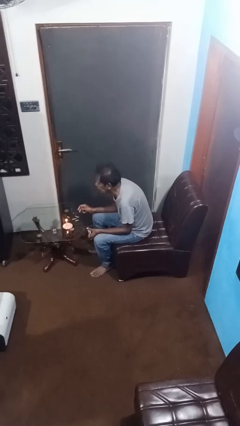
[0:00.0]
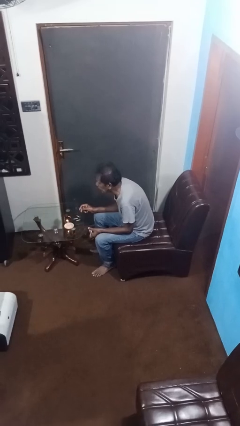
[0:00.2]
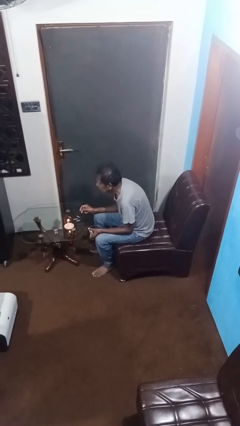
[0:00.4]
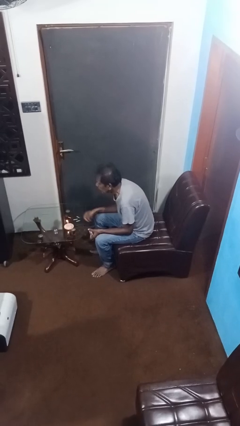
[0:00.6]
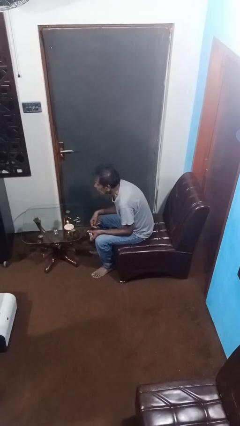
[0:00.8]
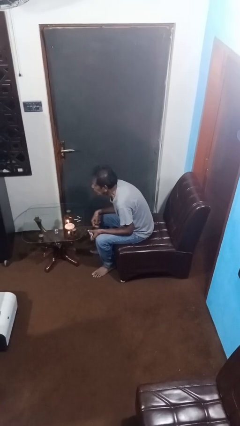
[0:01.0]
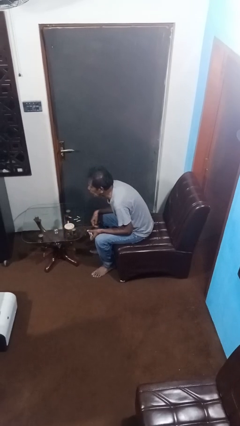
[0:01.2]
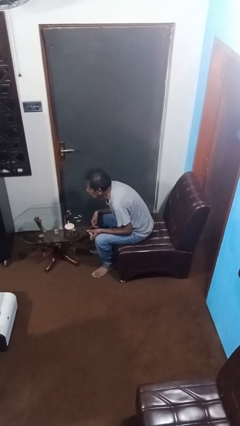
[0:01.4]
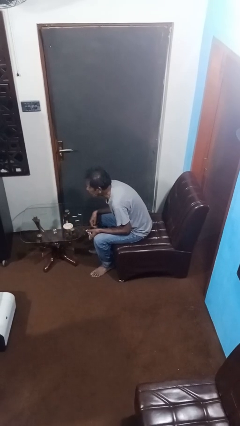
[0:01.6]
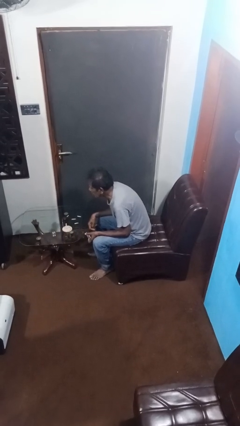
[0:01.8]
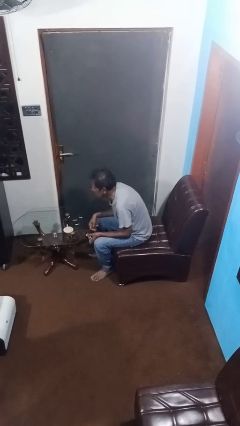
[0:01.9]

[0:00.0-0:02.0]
person extinguishes candle

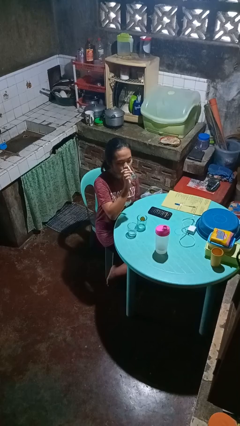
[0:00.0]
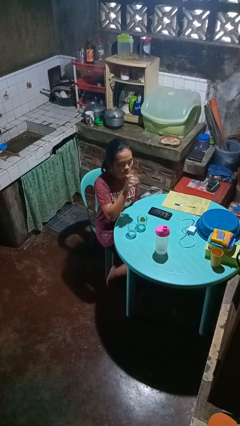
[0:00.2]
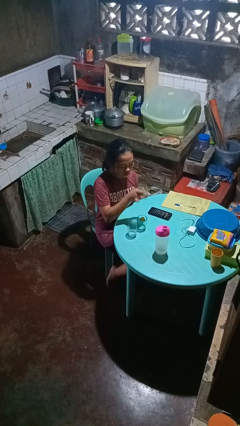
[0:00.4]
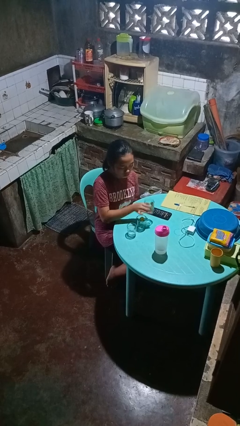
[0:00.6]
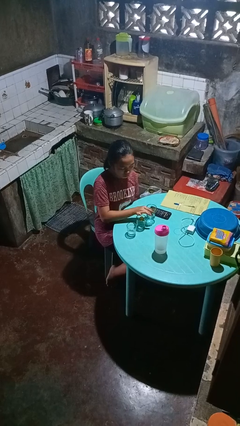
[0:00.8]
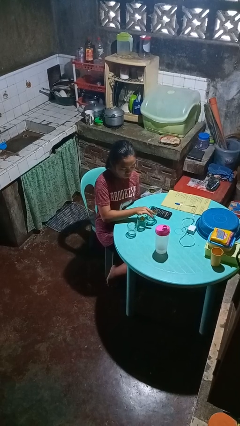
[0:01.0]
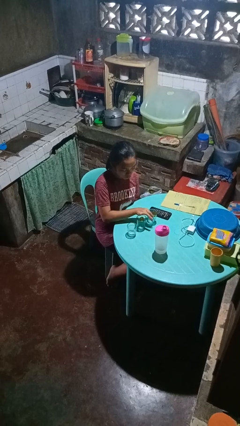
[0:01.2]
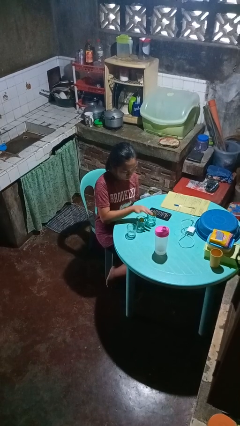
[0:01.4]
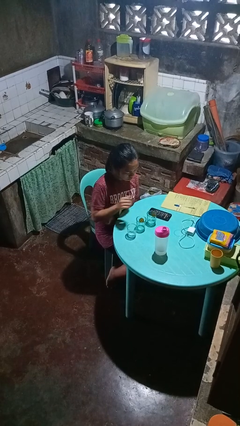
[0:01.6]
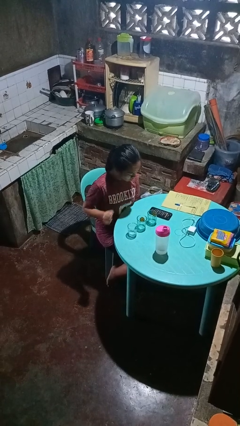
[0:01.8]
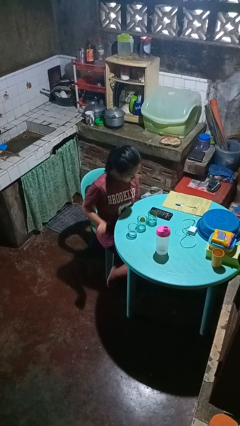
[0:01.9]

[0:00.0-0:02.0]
person puts down object on table

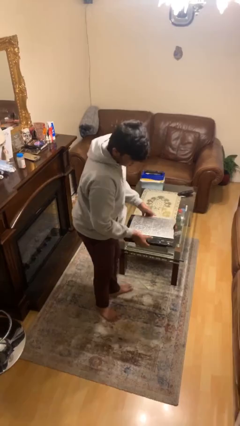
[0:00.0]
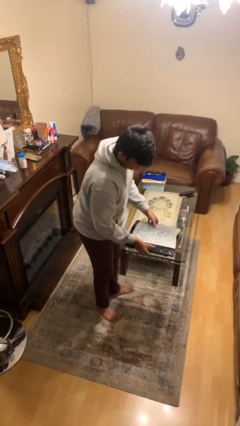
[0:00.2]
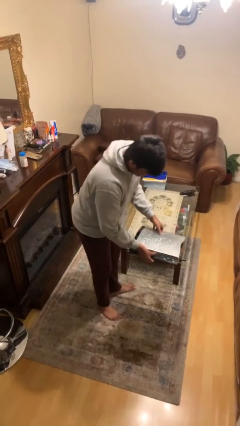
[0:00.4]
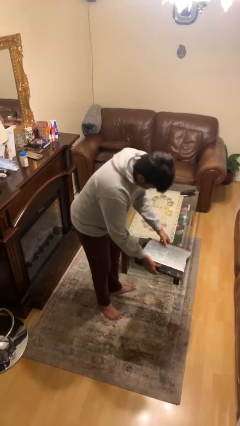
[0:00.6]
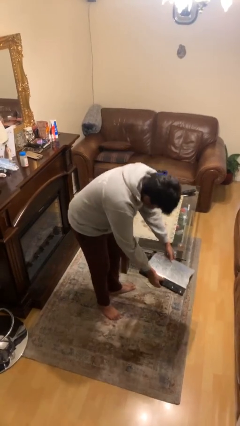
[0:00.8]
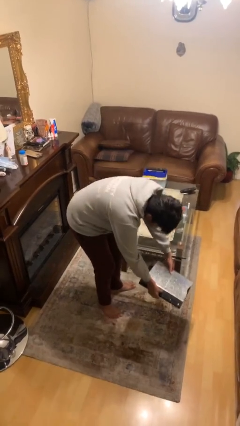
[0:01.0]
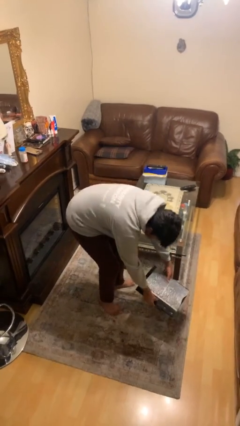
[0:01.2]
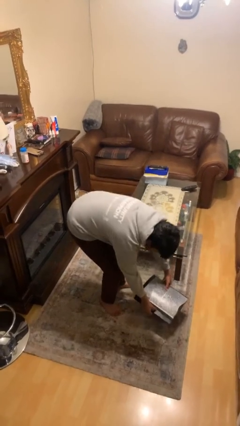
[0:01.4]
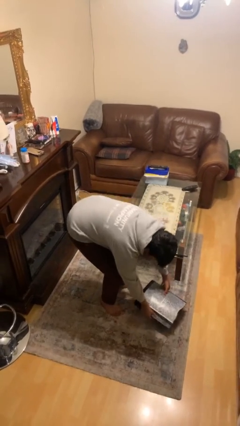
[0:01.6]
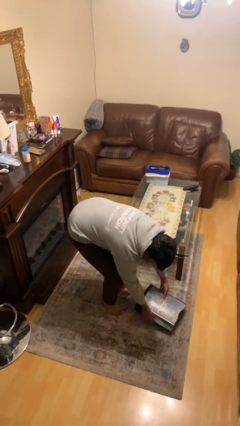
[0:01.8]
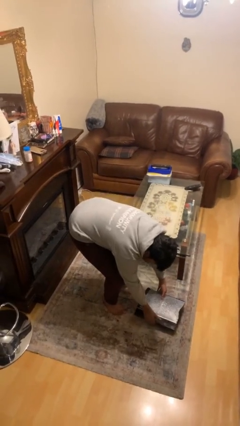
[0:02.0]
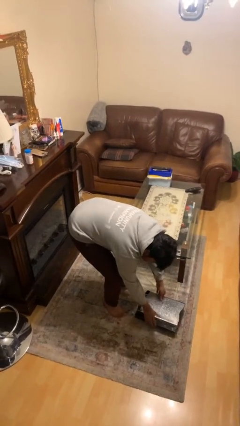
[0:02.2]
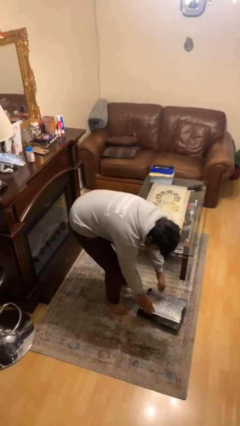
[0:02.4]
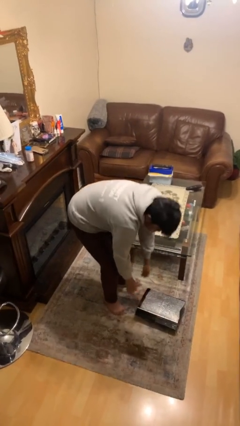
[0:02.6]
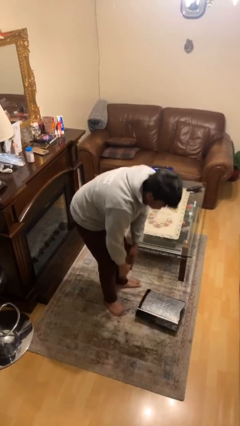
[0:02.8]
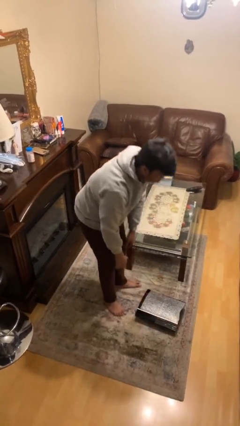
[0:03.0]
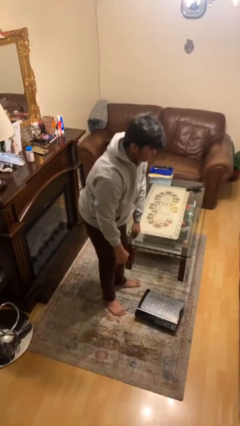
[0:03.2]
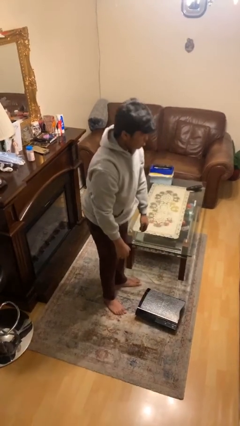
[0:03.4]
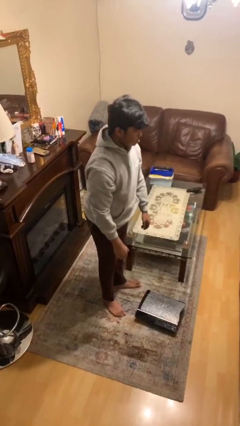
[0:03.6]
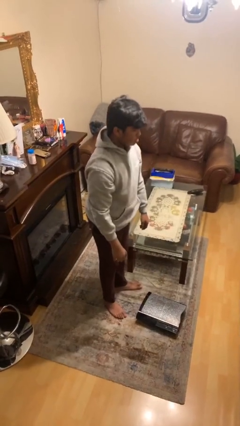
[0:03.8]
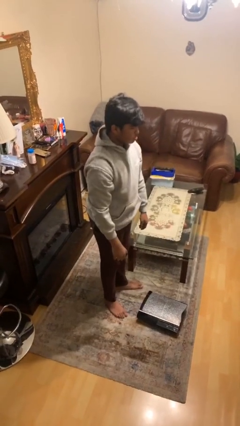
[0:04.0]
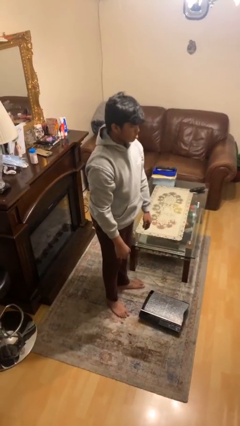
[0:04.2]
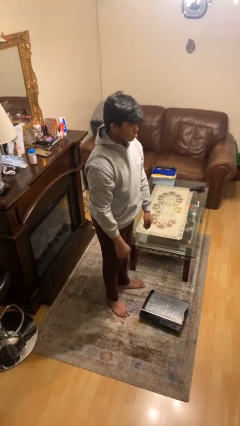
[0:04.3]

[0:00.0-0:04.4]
person puts down object on floor

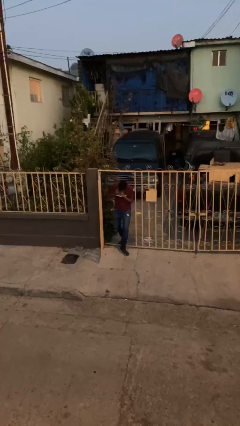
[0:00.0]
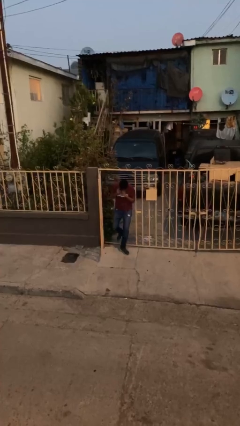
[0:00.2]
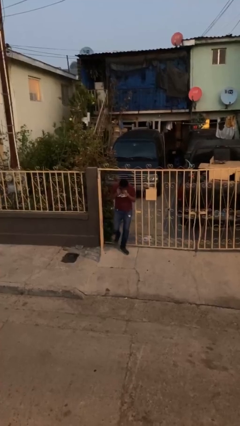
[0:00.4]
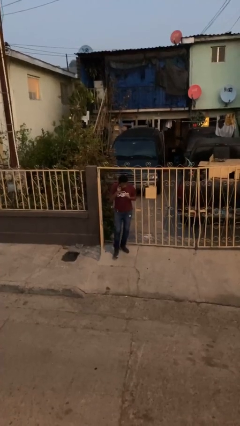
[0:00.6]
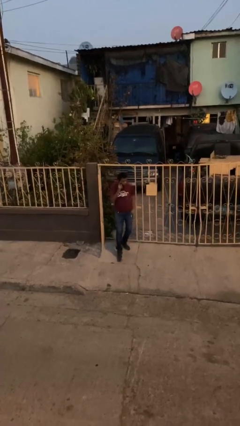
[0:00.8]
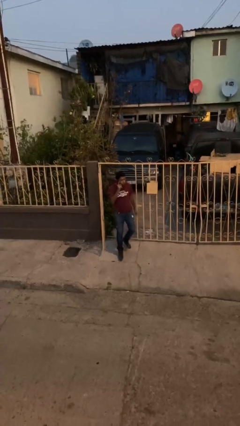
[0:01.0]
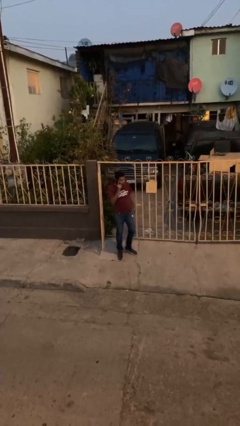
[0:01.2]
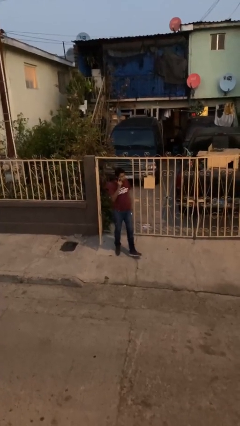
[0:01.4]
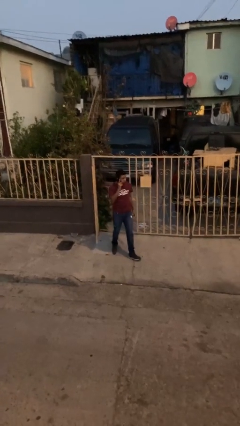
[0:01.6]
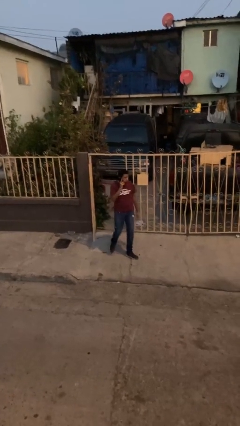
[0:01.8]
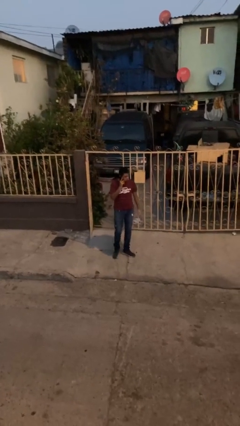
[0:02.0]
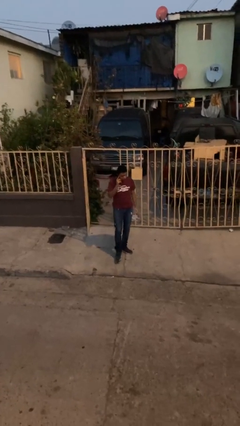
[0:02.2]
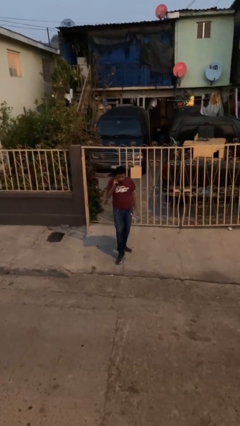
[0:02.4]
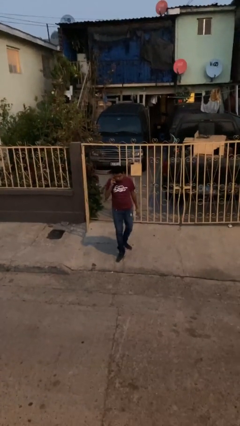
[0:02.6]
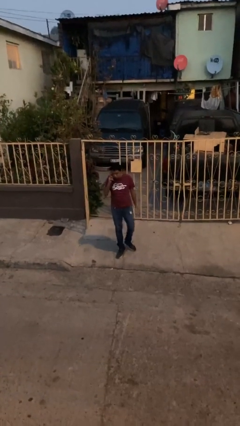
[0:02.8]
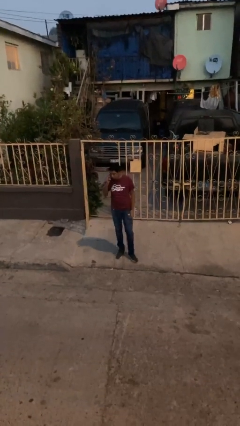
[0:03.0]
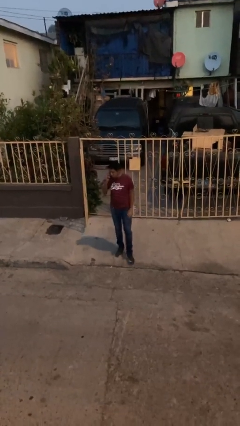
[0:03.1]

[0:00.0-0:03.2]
person enters scene through structure

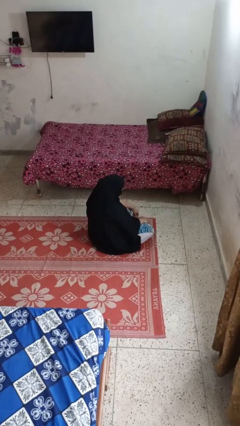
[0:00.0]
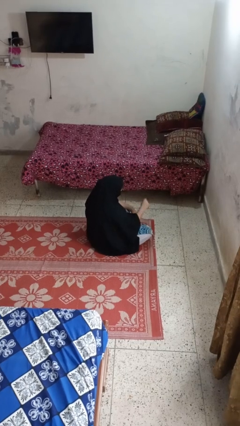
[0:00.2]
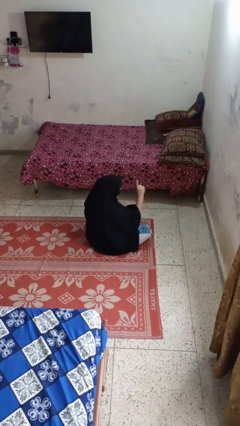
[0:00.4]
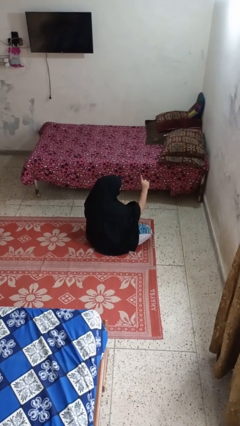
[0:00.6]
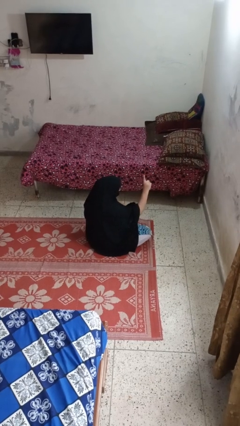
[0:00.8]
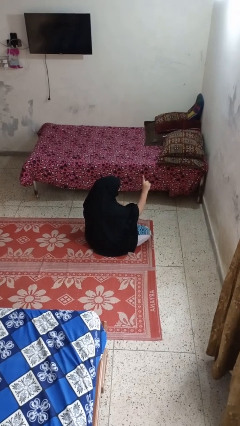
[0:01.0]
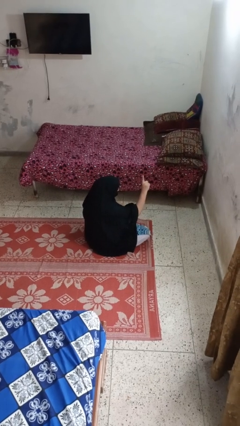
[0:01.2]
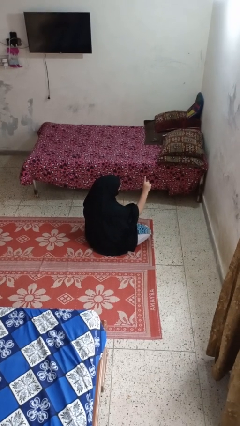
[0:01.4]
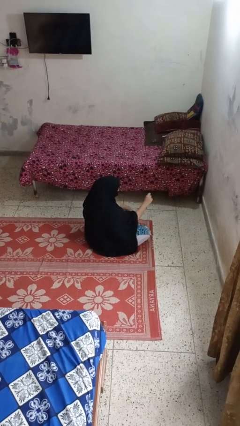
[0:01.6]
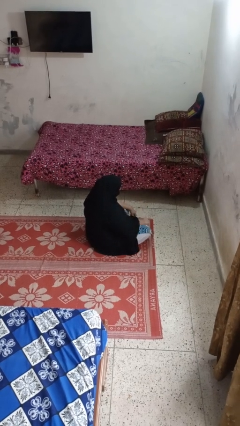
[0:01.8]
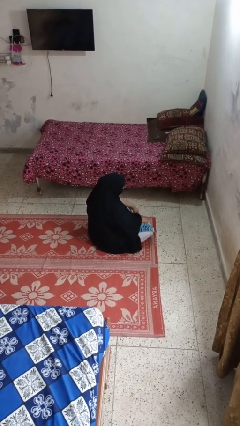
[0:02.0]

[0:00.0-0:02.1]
person gestures number one

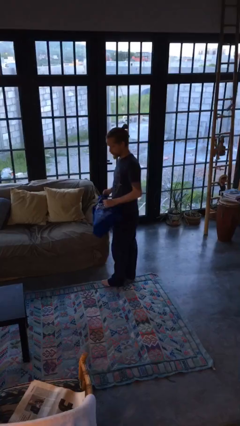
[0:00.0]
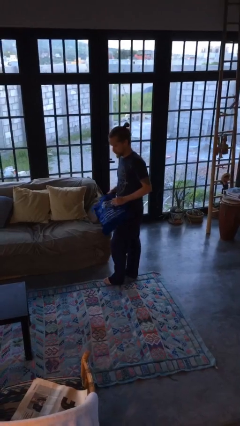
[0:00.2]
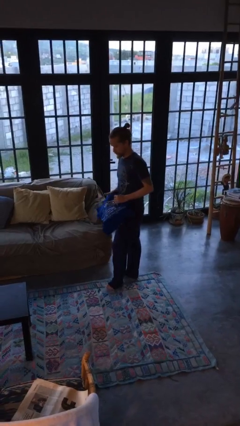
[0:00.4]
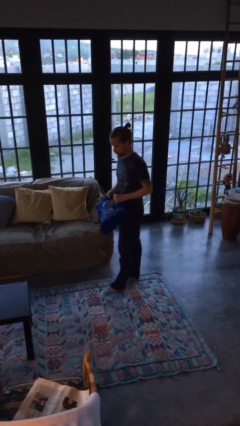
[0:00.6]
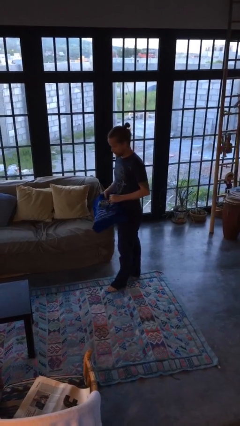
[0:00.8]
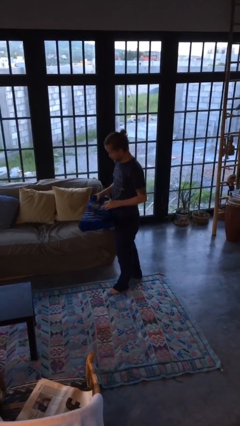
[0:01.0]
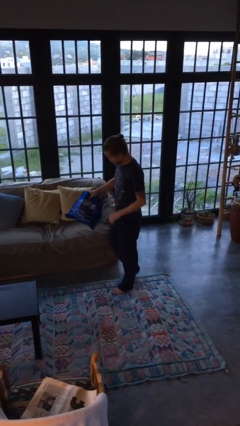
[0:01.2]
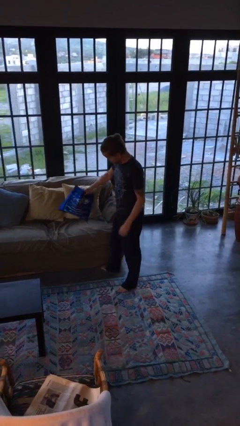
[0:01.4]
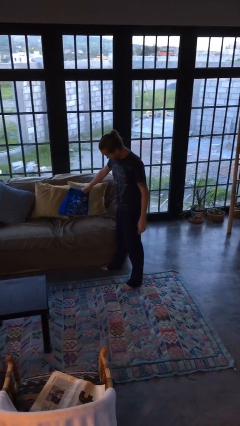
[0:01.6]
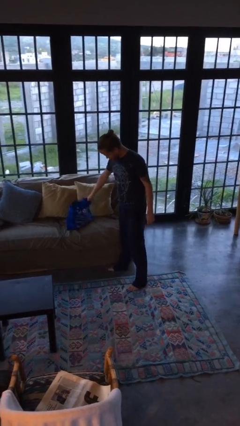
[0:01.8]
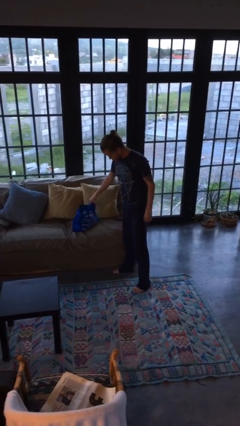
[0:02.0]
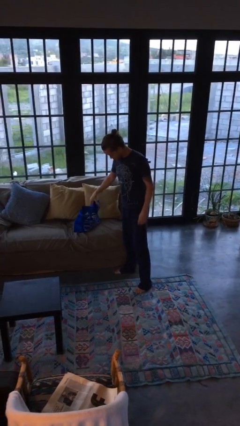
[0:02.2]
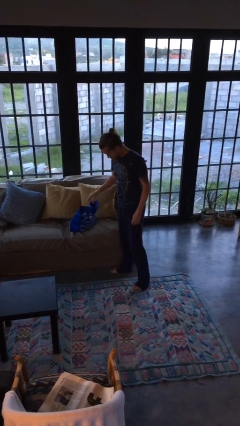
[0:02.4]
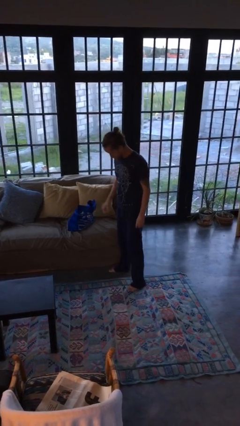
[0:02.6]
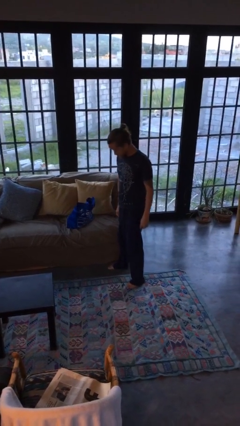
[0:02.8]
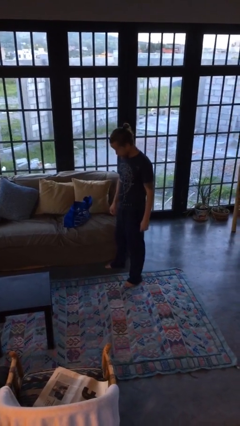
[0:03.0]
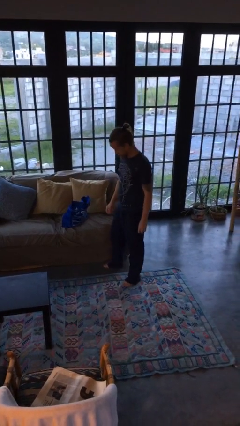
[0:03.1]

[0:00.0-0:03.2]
person puts down object on couch

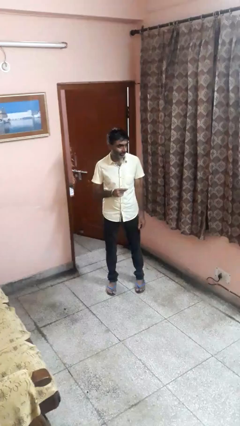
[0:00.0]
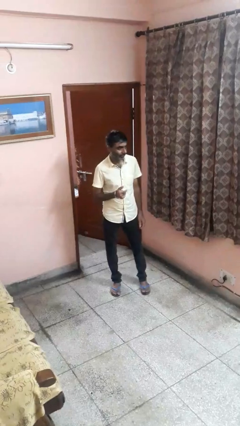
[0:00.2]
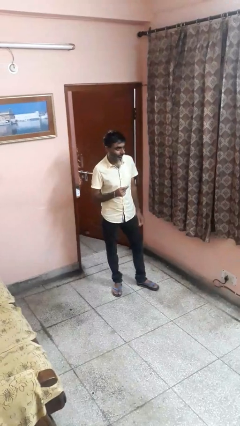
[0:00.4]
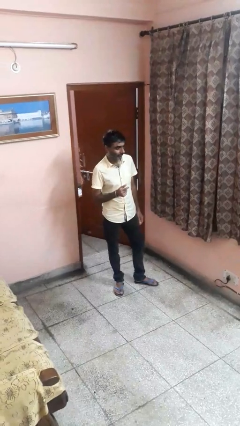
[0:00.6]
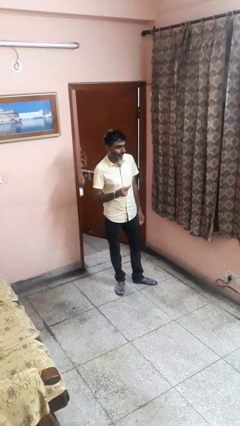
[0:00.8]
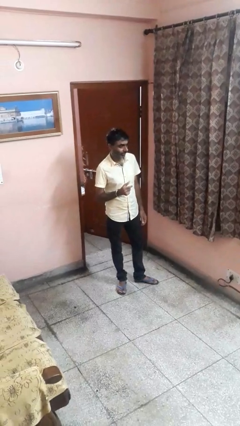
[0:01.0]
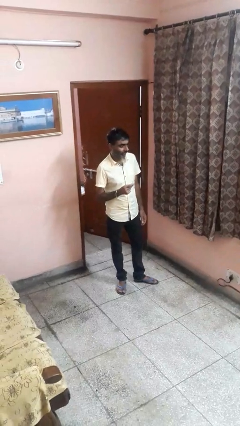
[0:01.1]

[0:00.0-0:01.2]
person snaps fingers
